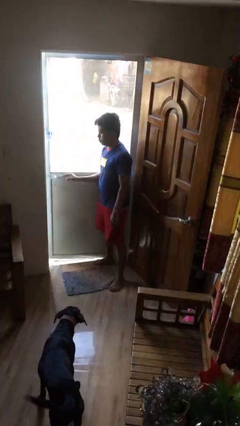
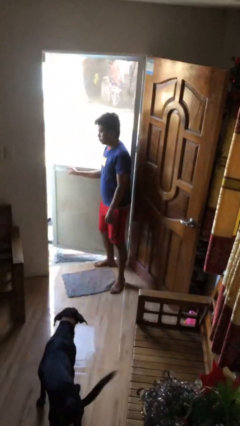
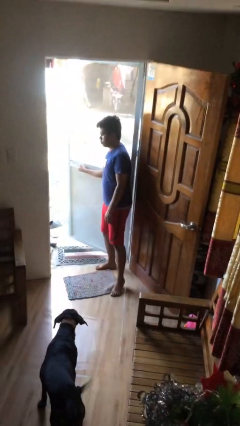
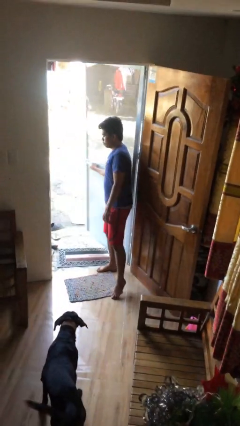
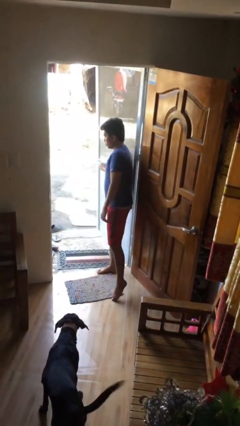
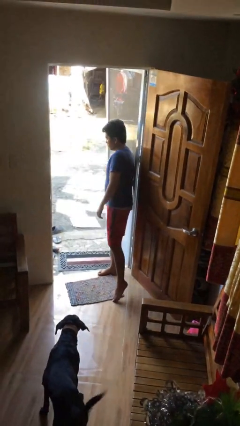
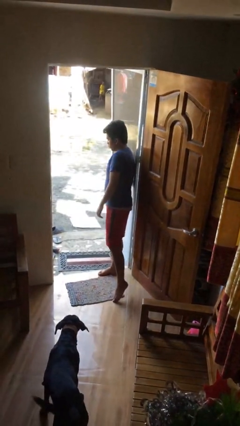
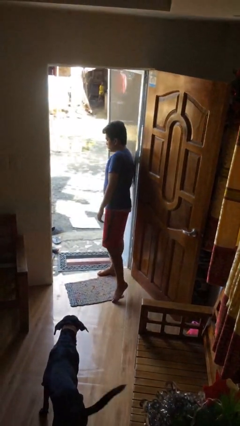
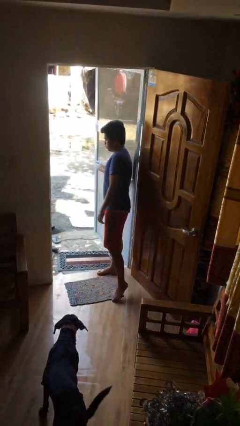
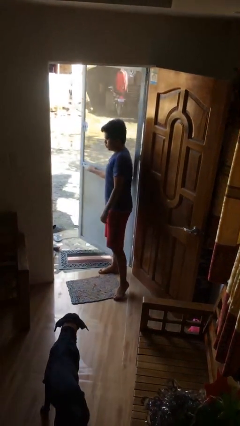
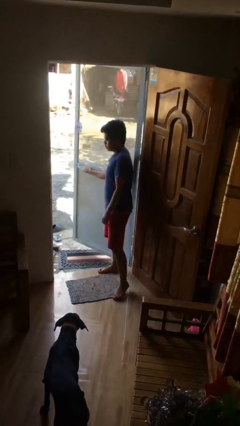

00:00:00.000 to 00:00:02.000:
person opens facility door

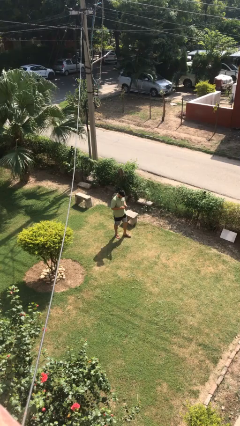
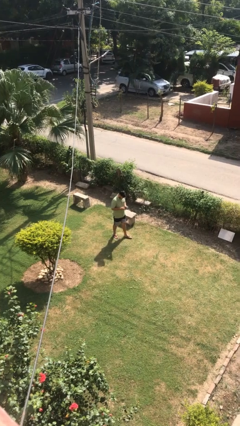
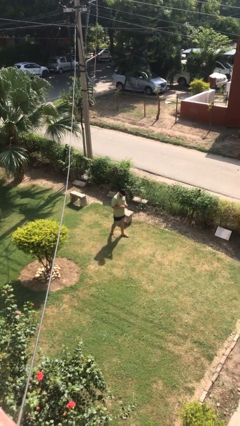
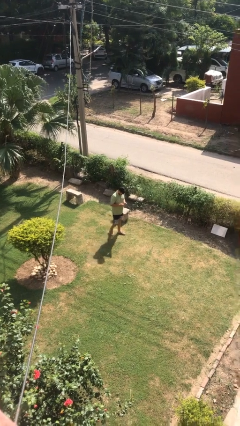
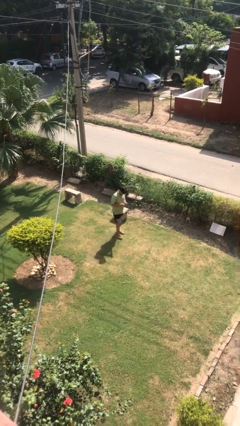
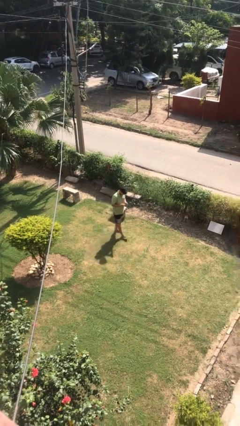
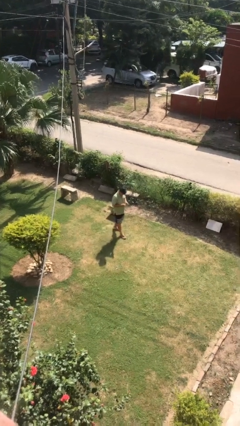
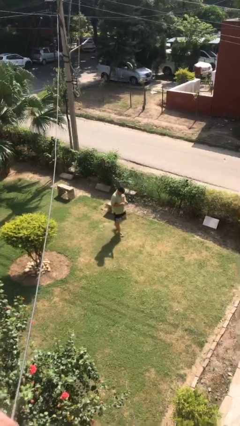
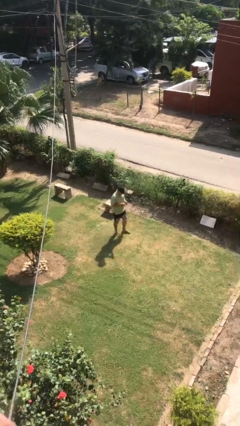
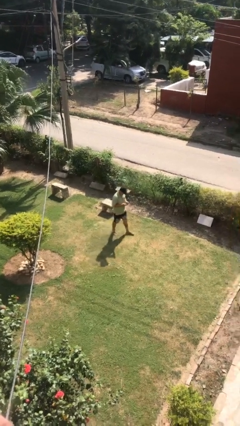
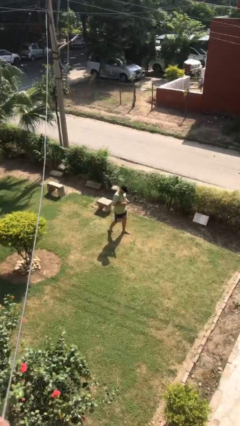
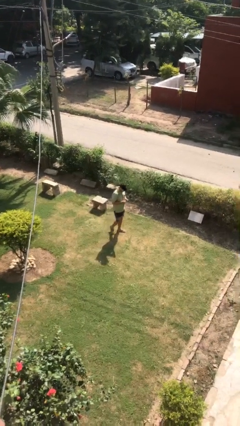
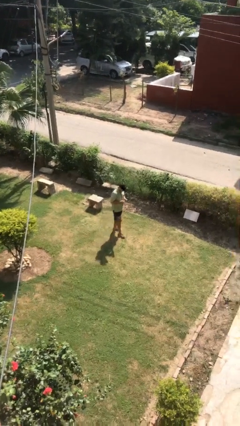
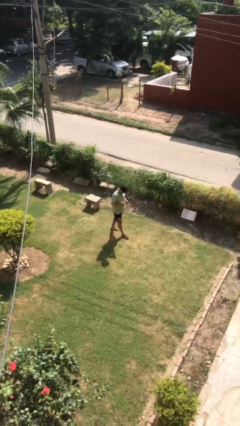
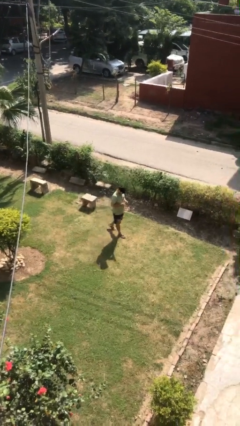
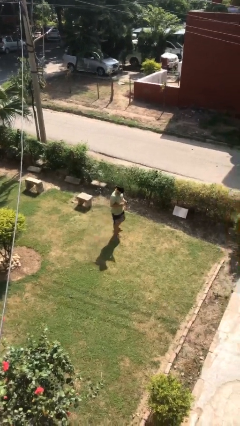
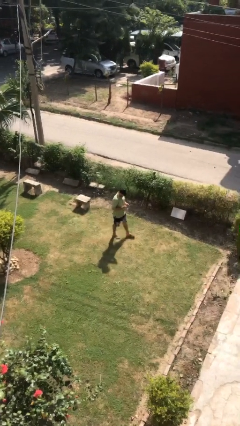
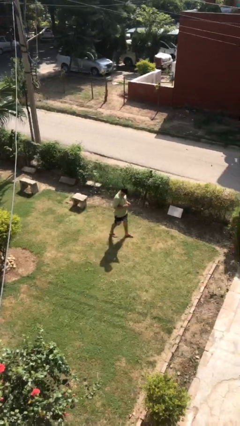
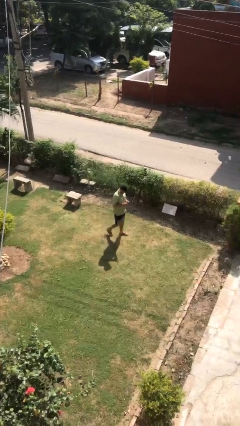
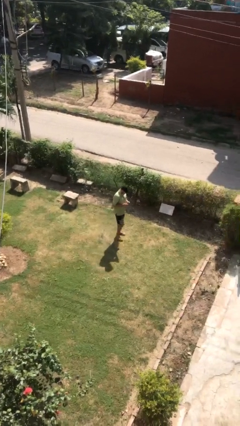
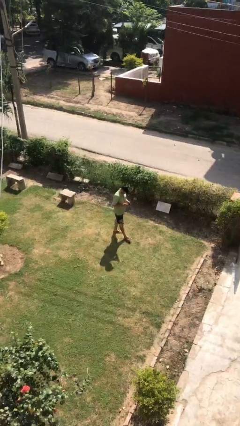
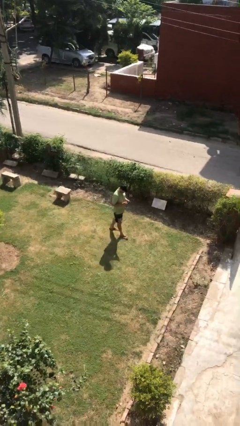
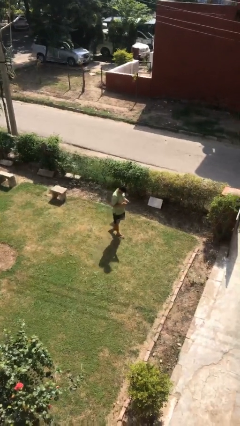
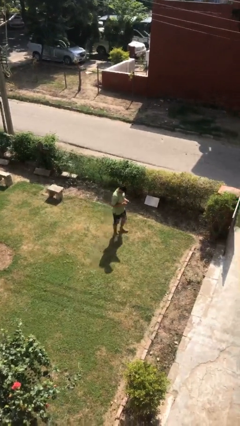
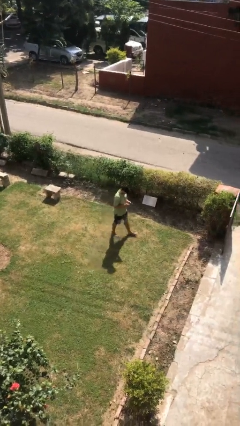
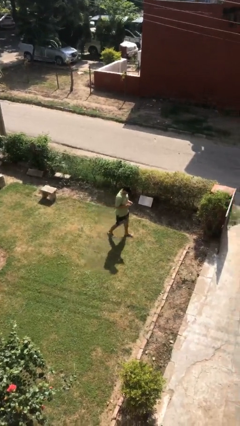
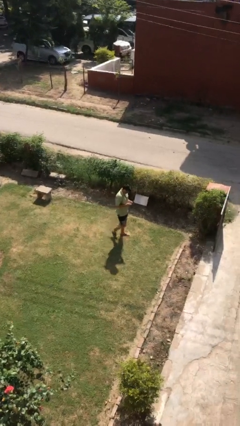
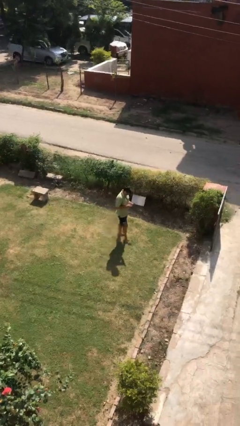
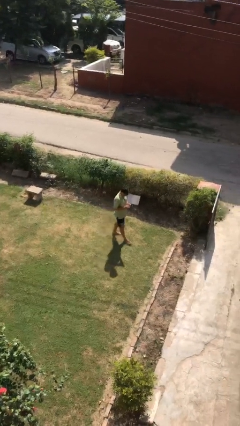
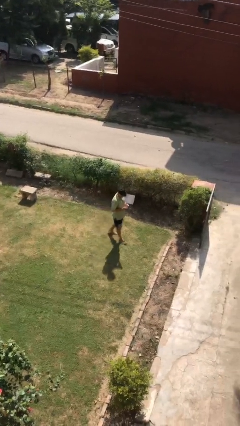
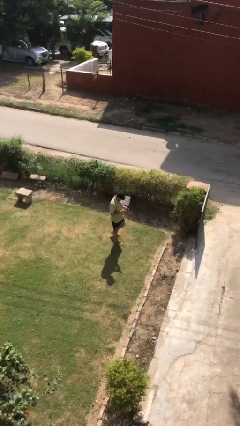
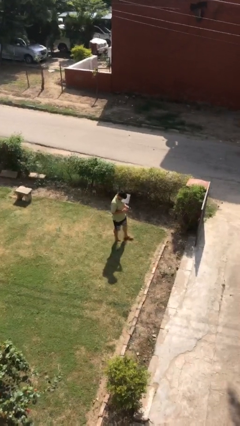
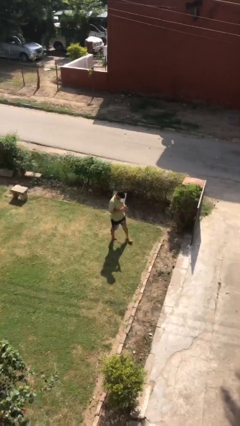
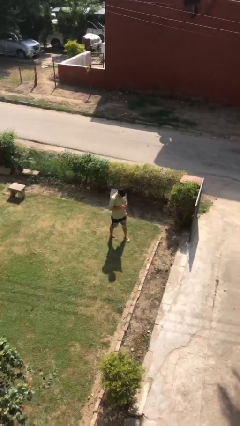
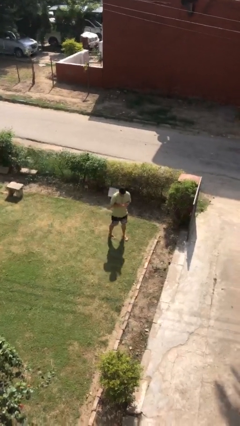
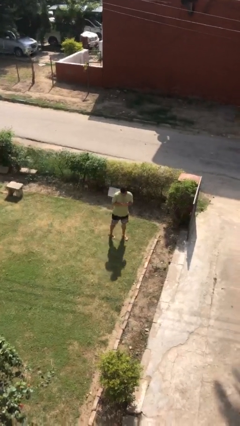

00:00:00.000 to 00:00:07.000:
person texts on phone

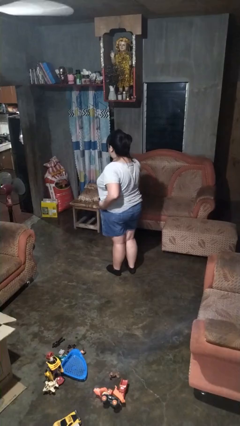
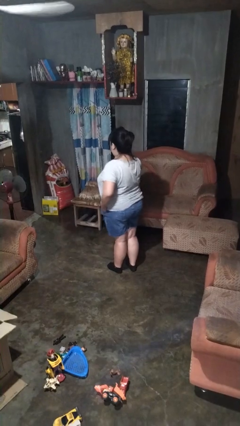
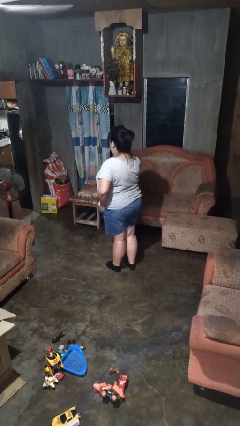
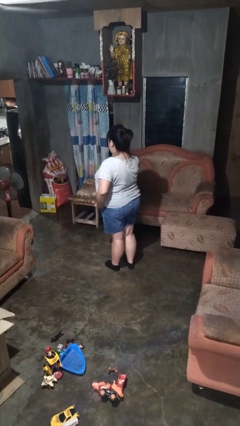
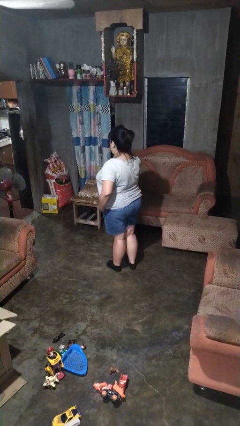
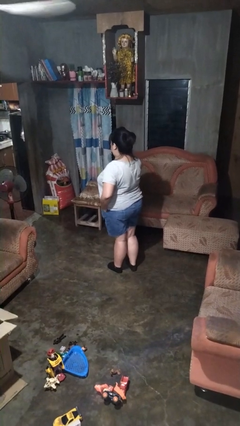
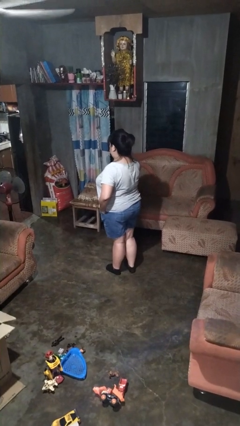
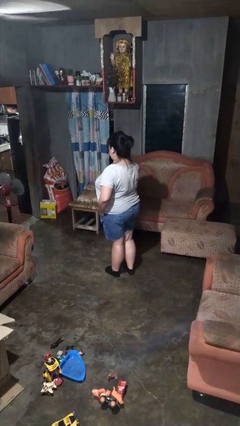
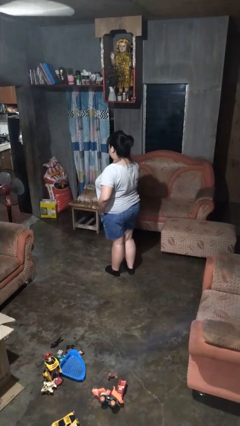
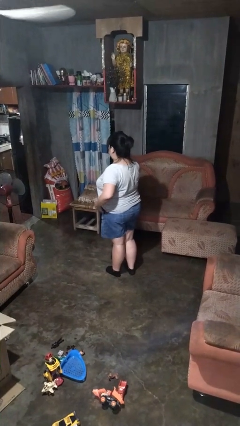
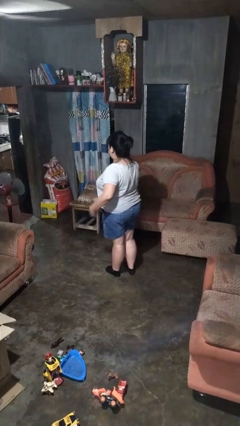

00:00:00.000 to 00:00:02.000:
person puts hands in back pockets

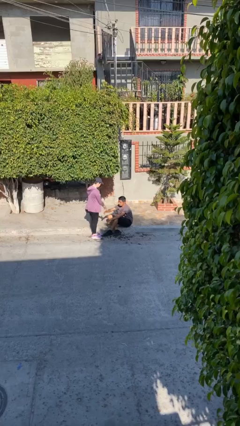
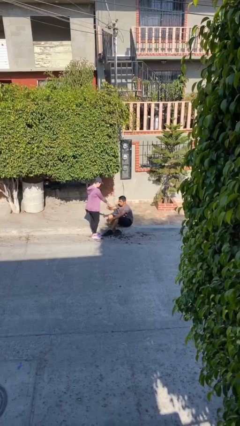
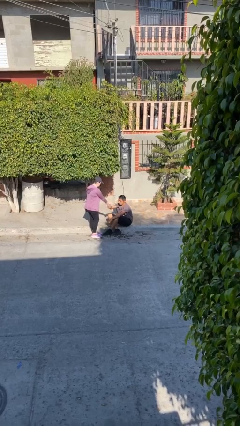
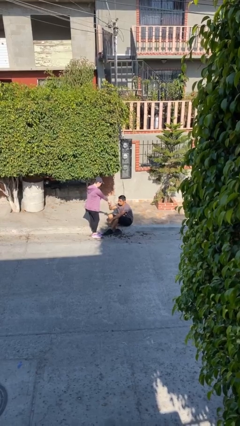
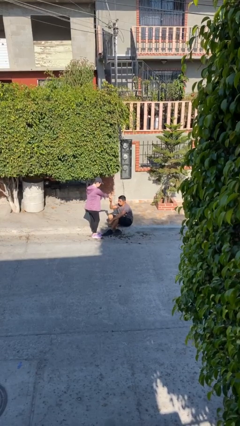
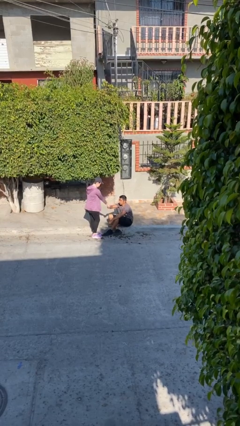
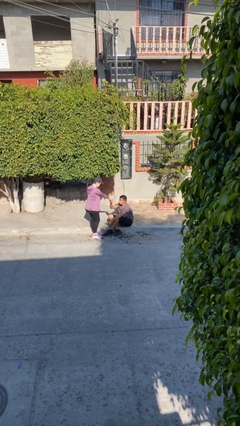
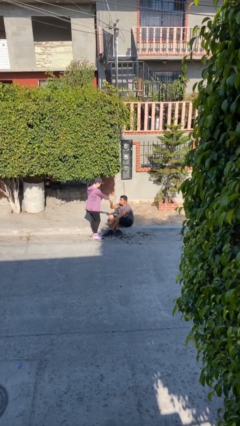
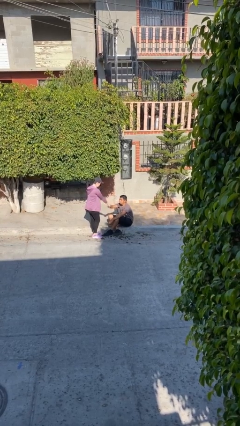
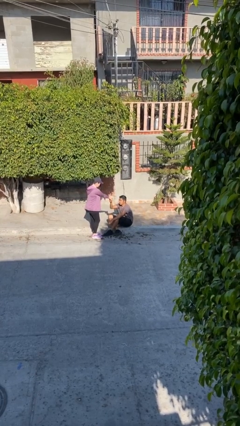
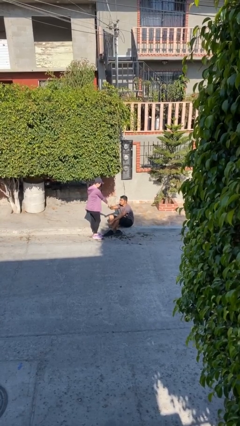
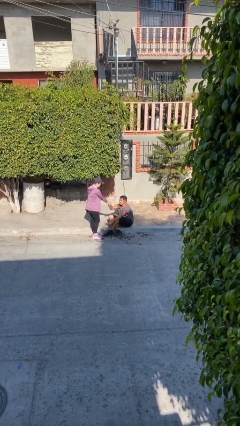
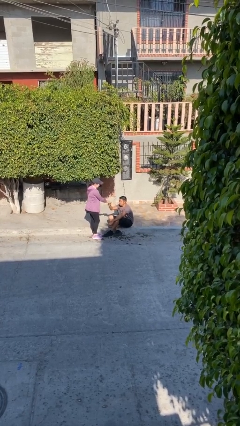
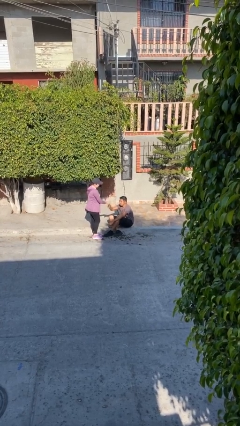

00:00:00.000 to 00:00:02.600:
person shakes hand

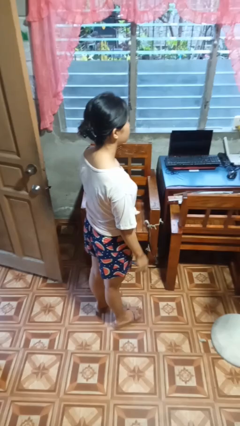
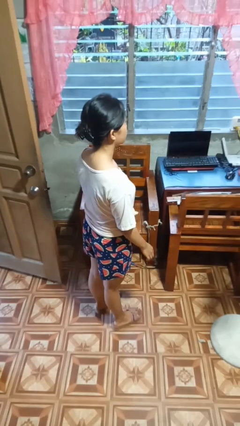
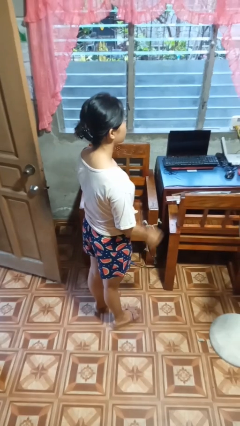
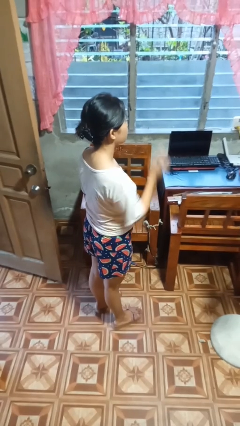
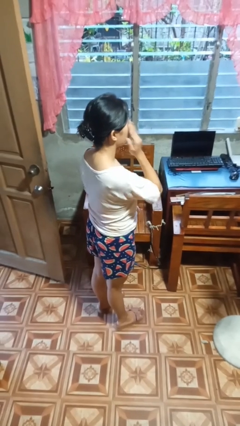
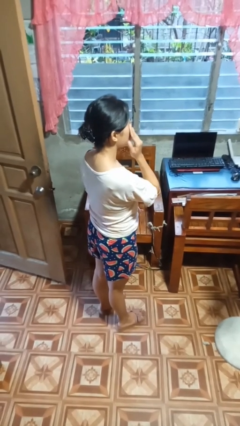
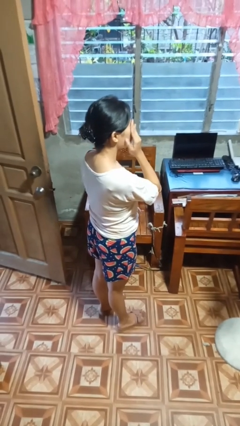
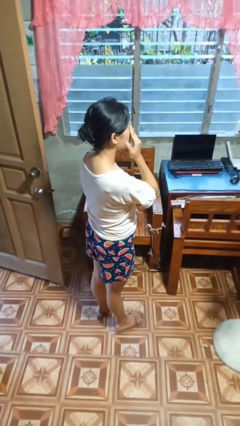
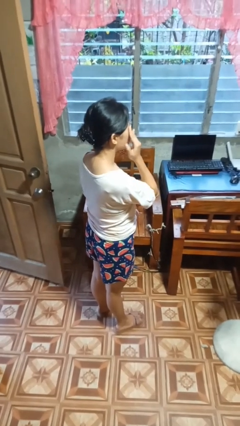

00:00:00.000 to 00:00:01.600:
person rubs eyes

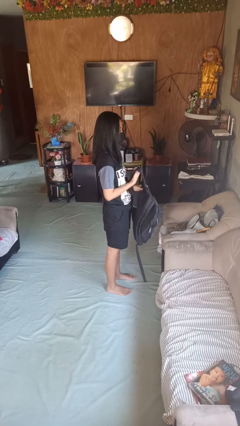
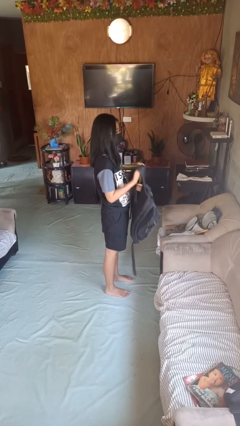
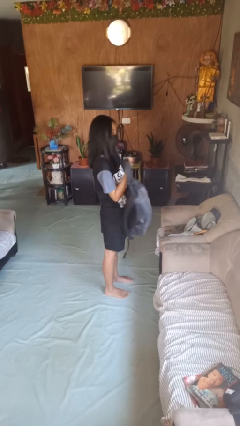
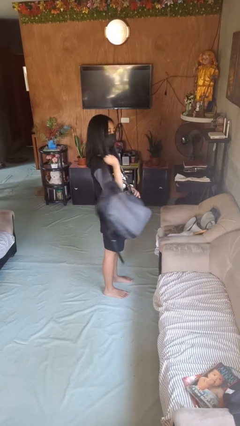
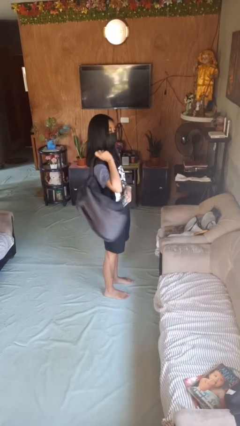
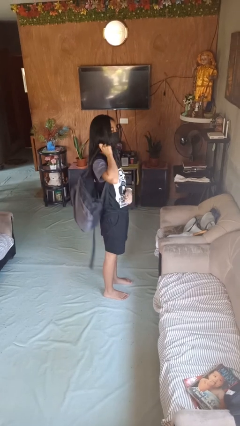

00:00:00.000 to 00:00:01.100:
person puts on backpack

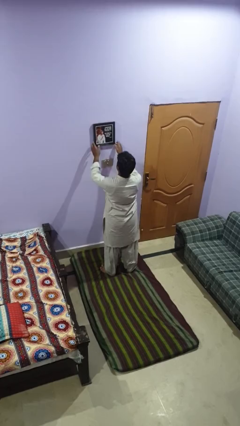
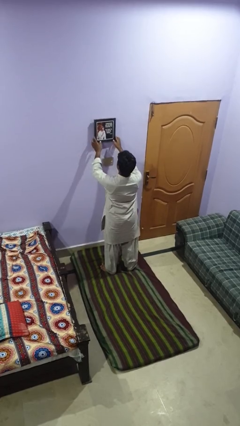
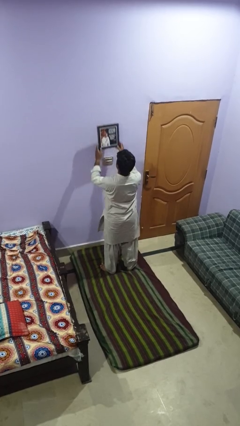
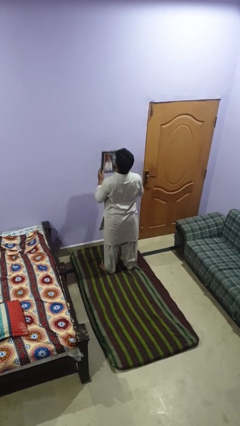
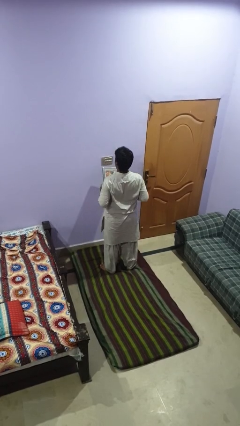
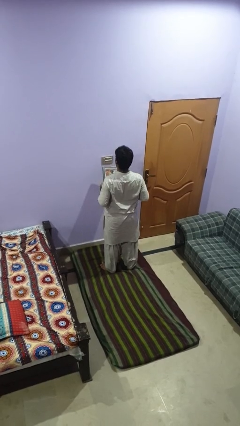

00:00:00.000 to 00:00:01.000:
person takes down picture frame
